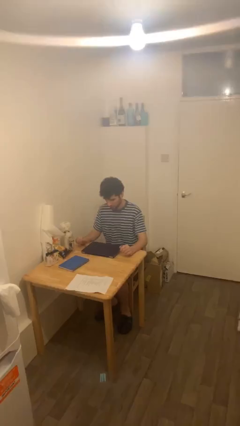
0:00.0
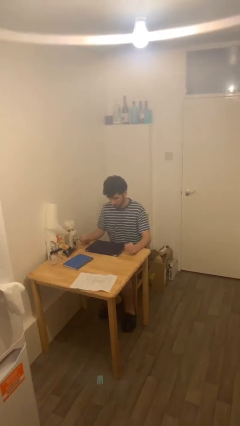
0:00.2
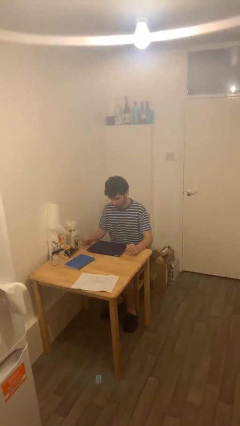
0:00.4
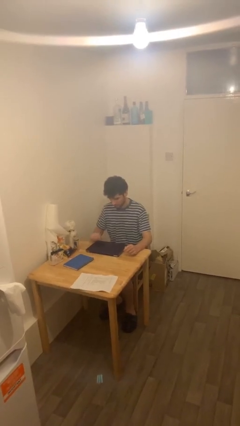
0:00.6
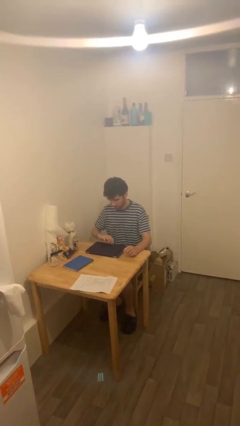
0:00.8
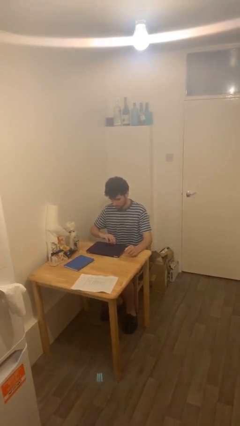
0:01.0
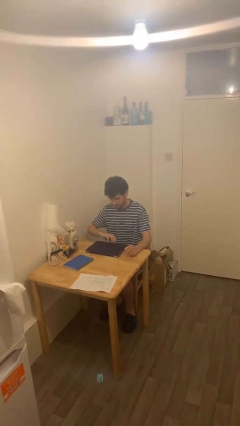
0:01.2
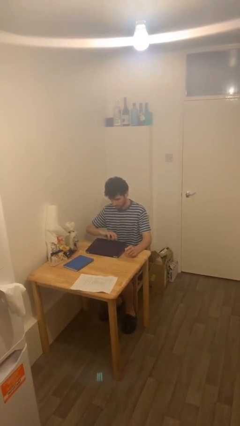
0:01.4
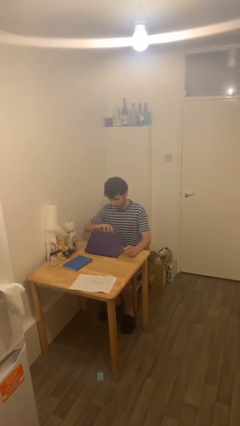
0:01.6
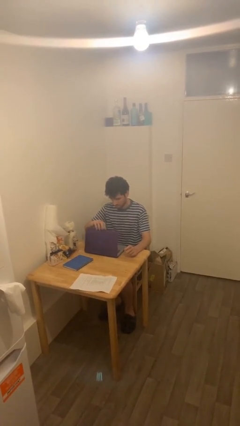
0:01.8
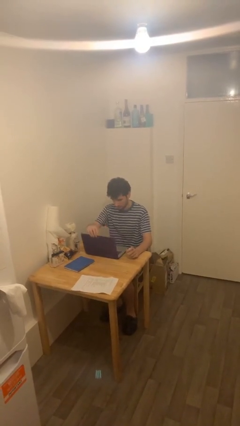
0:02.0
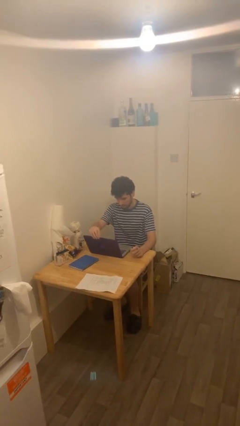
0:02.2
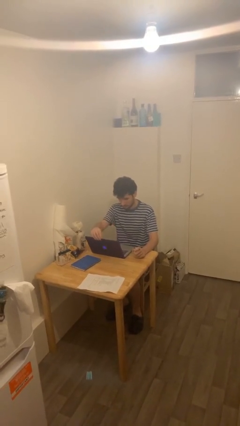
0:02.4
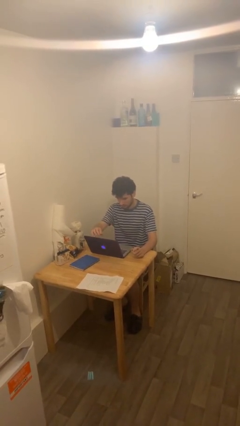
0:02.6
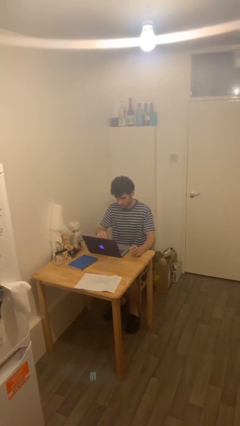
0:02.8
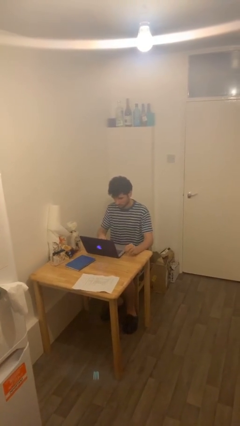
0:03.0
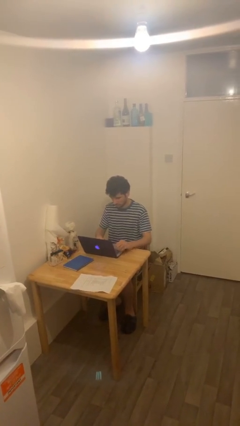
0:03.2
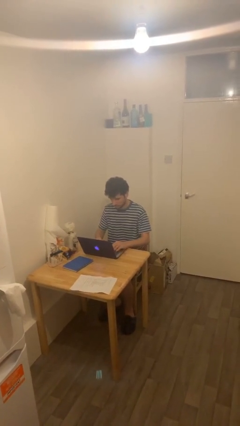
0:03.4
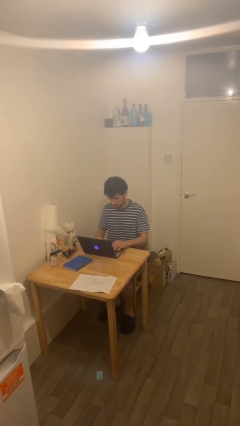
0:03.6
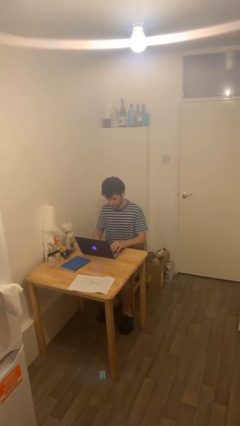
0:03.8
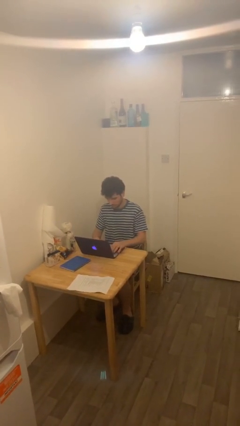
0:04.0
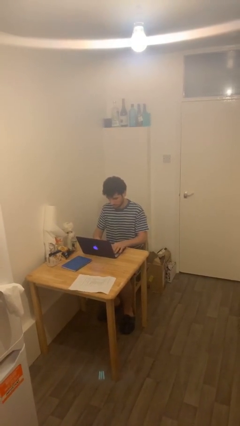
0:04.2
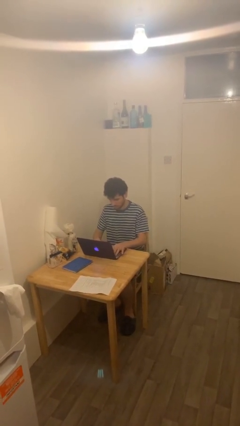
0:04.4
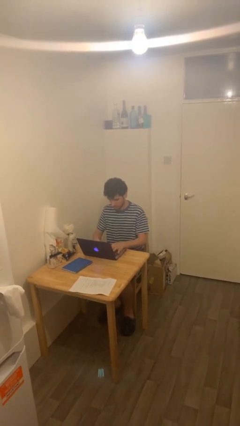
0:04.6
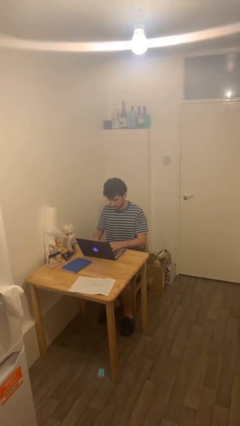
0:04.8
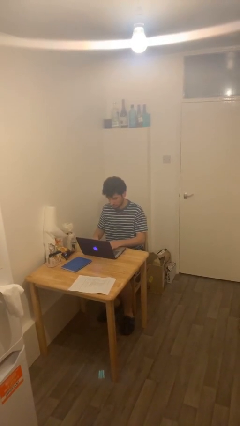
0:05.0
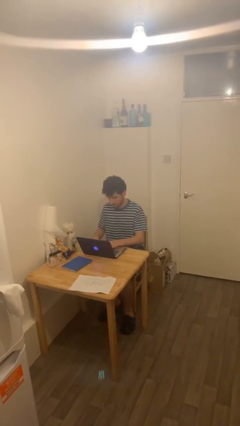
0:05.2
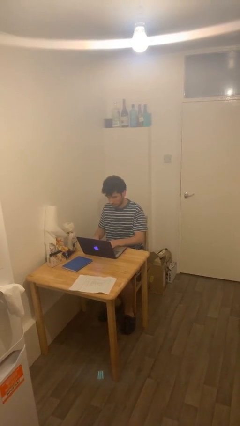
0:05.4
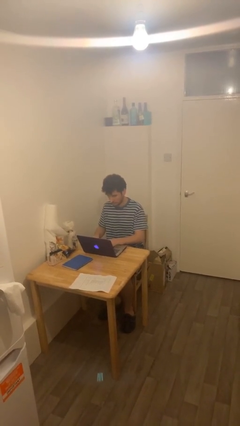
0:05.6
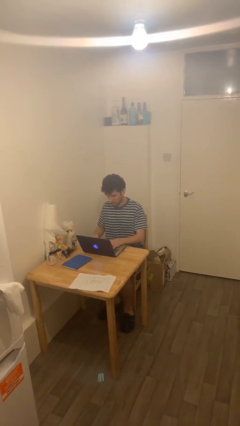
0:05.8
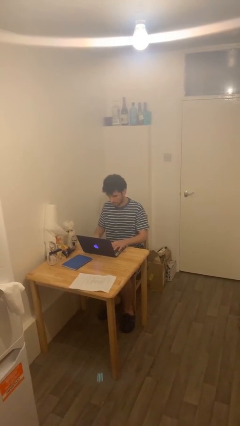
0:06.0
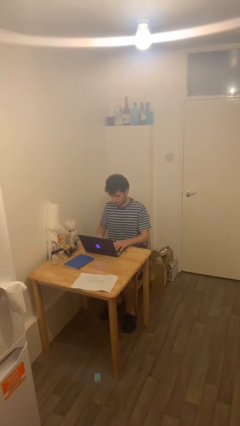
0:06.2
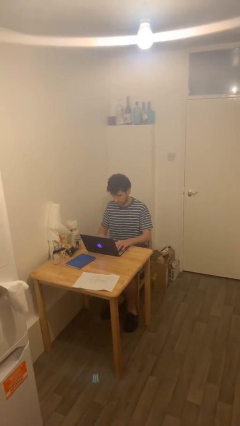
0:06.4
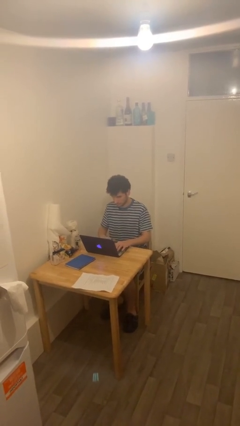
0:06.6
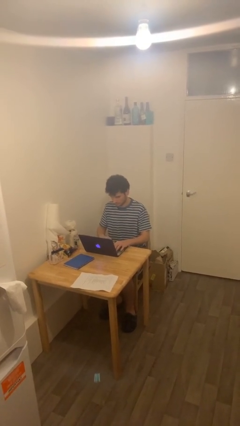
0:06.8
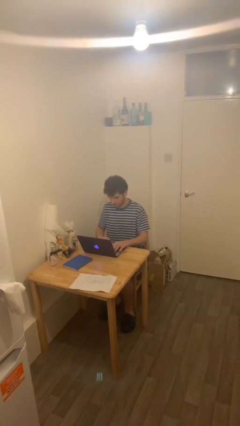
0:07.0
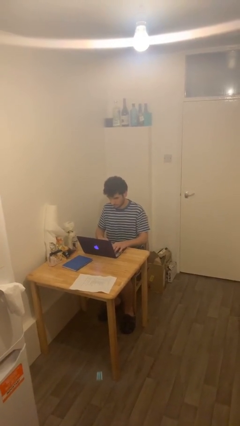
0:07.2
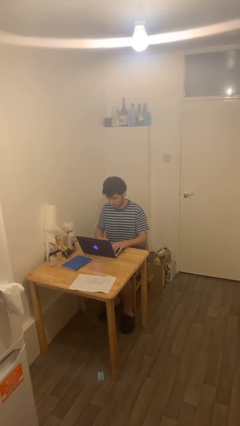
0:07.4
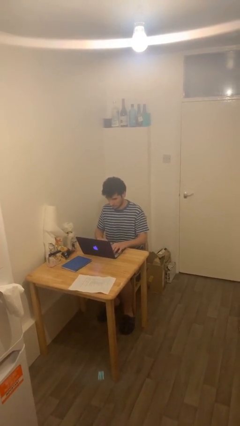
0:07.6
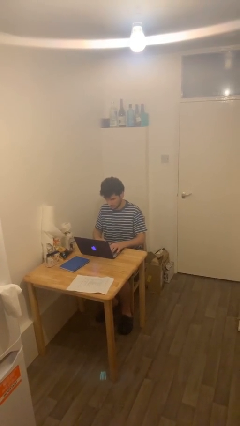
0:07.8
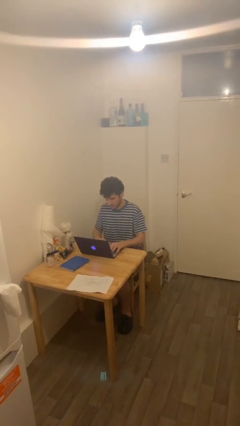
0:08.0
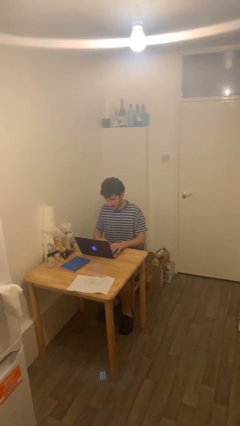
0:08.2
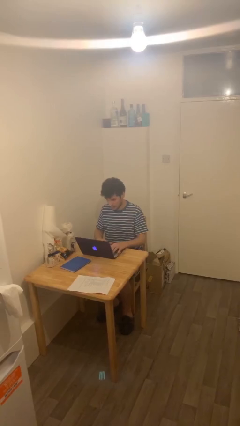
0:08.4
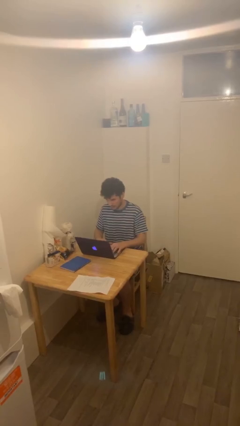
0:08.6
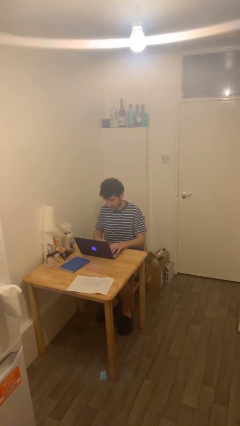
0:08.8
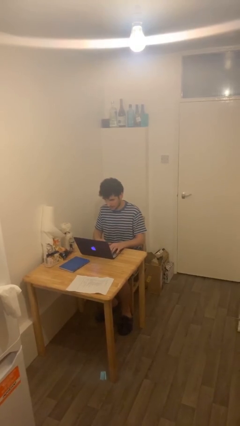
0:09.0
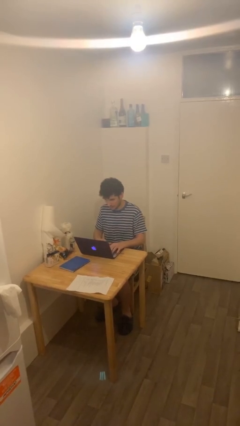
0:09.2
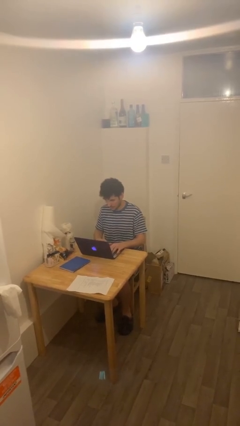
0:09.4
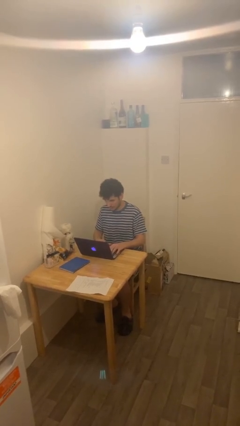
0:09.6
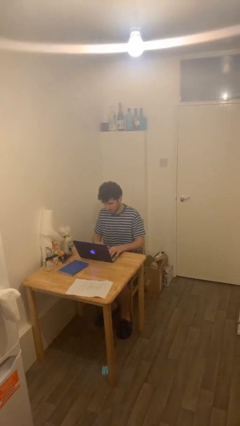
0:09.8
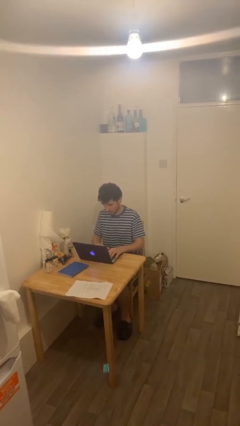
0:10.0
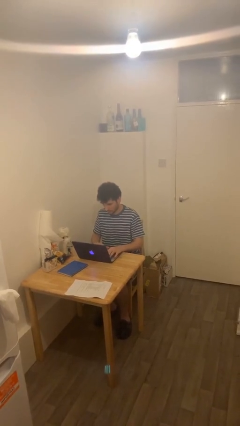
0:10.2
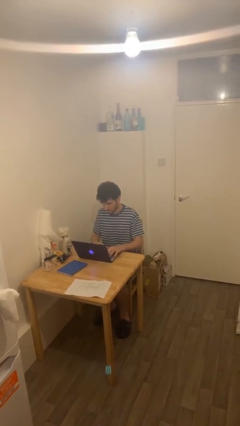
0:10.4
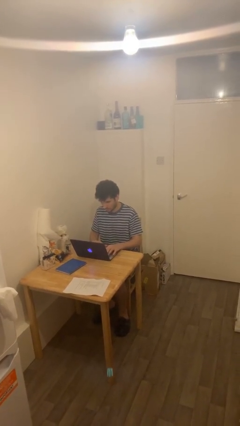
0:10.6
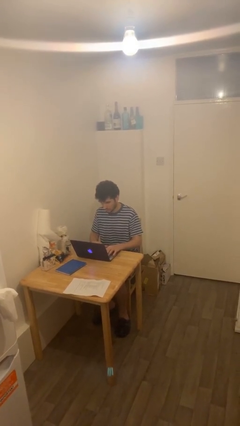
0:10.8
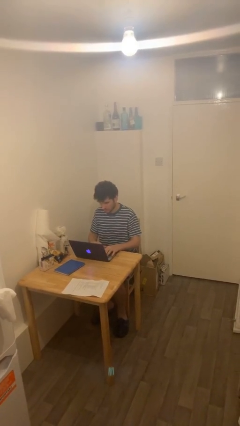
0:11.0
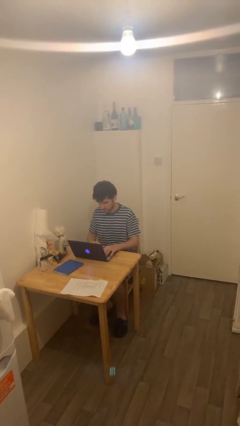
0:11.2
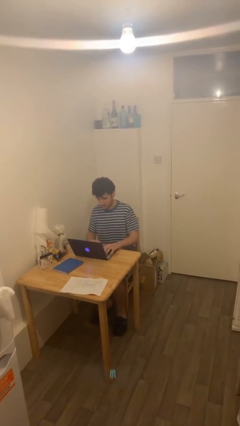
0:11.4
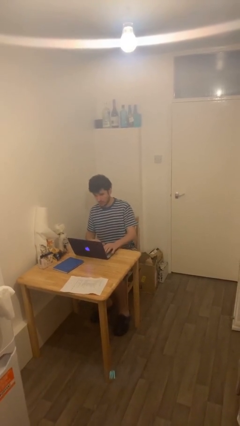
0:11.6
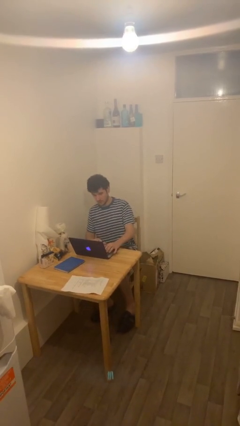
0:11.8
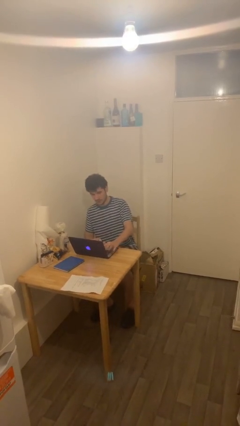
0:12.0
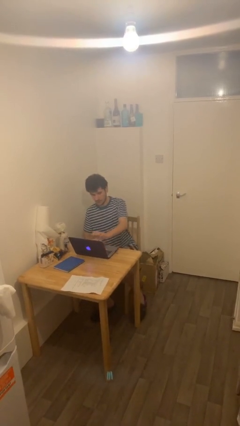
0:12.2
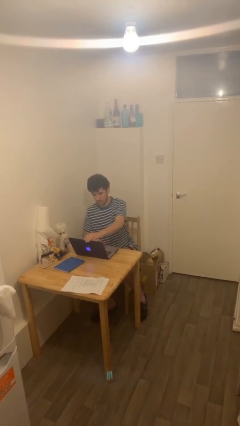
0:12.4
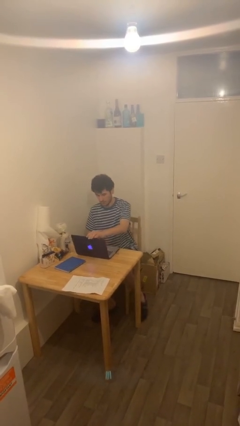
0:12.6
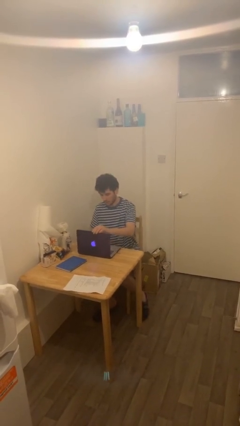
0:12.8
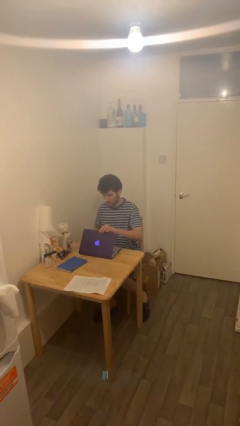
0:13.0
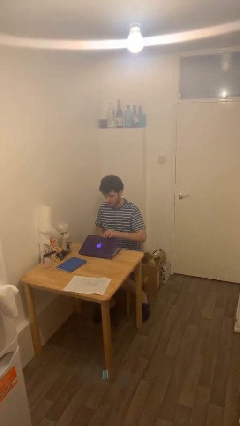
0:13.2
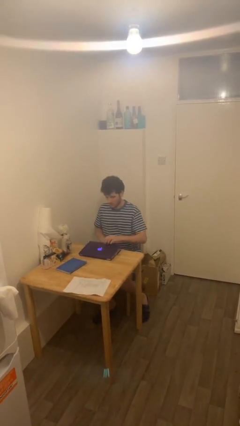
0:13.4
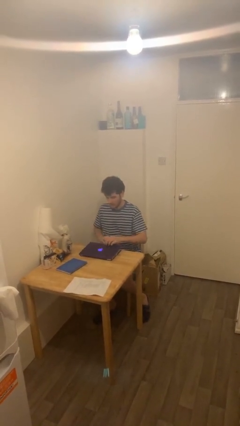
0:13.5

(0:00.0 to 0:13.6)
person interacts with laptop

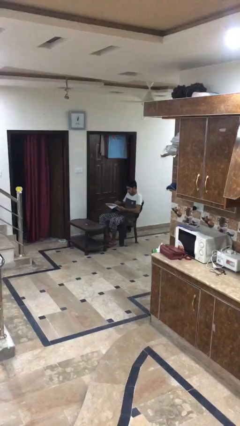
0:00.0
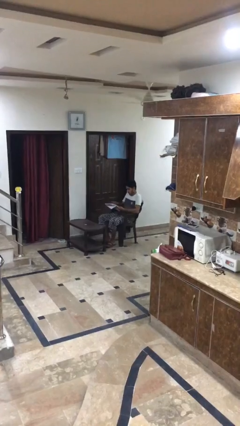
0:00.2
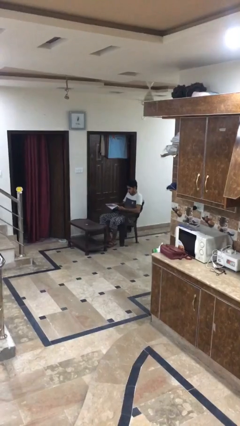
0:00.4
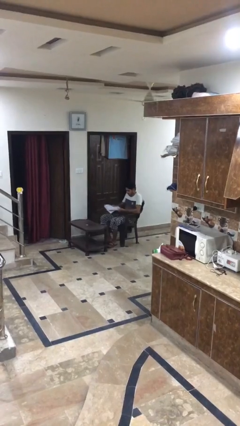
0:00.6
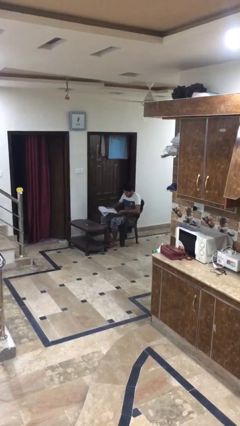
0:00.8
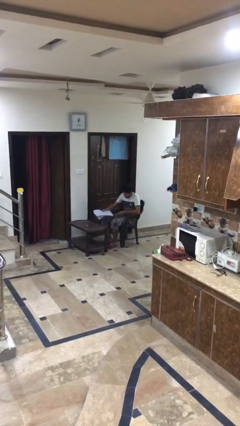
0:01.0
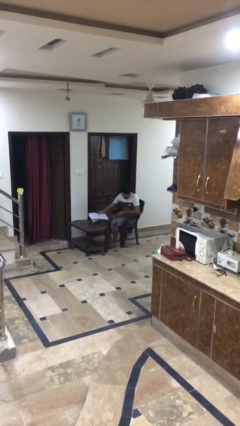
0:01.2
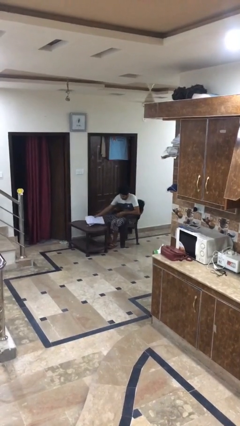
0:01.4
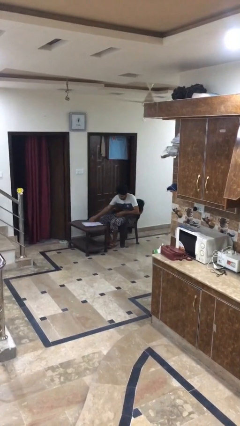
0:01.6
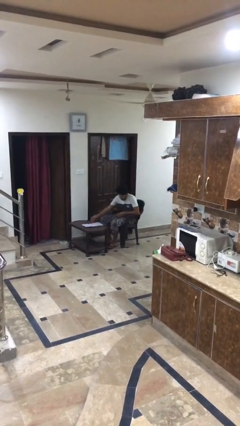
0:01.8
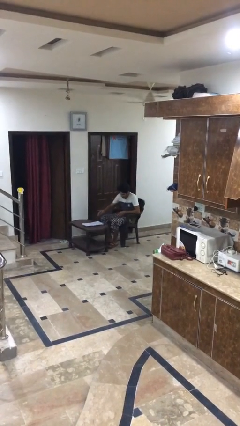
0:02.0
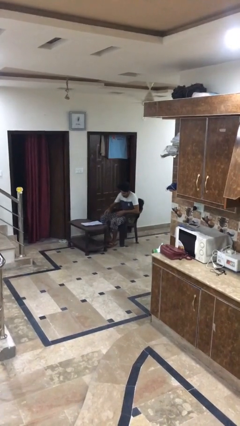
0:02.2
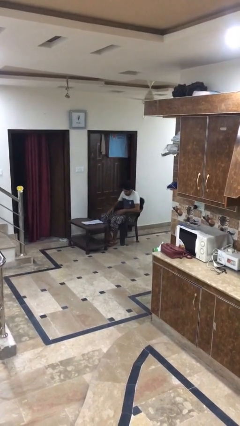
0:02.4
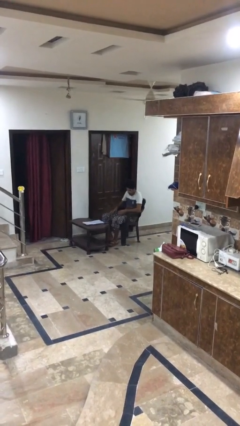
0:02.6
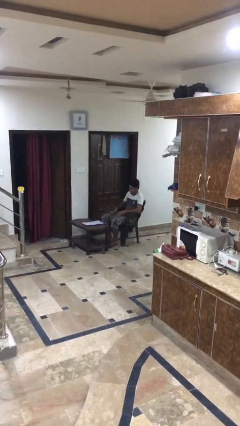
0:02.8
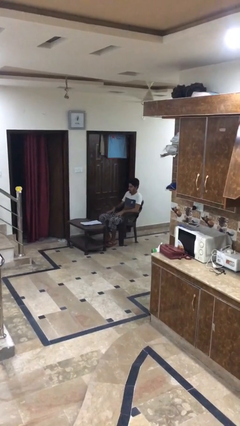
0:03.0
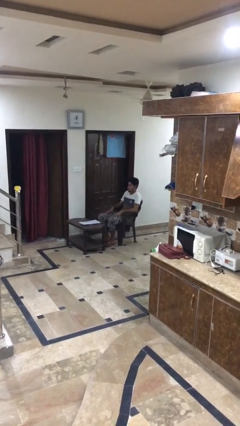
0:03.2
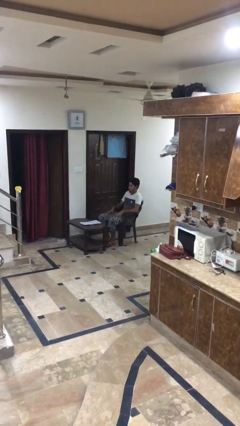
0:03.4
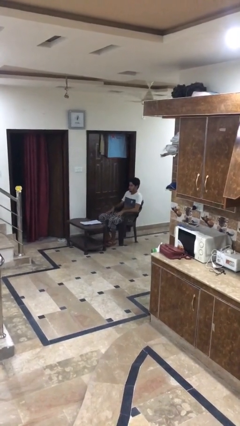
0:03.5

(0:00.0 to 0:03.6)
person puts down object on table

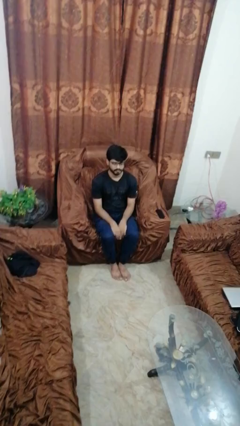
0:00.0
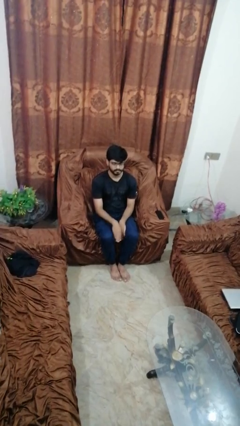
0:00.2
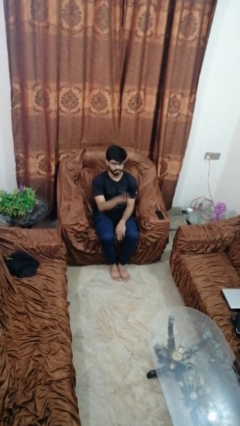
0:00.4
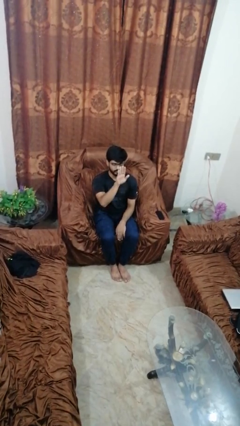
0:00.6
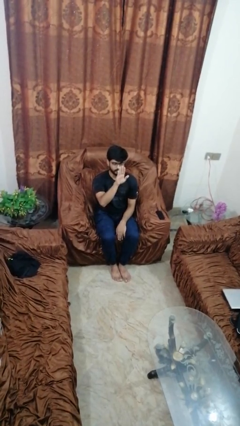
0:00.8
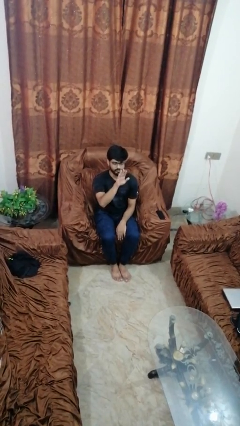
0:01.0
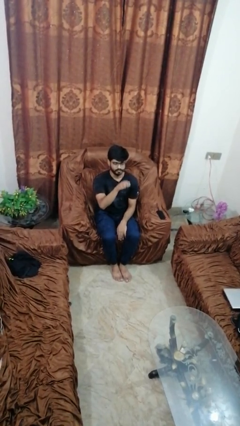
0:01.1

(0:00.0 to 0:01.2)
person gestures swipe up
